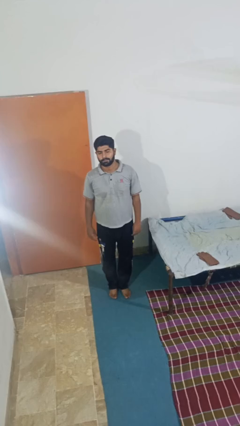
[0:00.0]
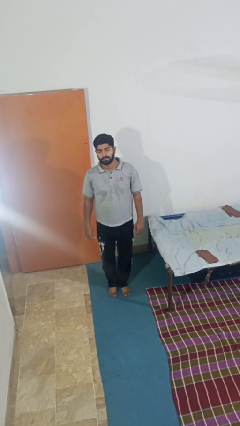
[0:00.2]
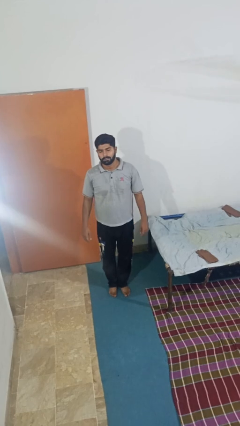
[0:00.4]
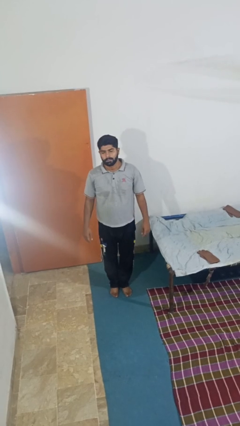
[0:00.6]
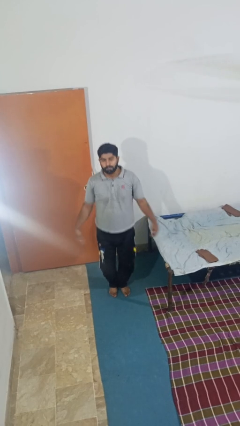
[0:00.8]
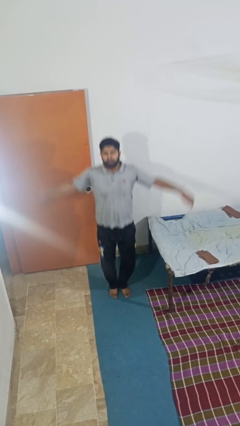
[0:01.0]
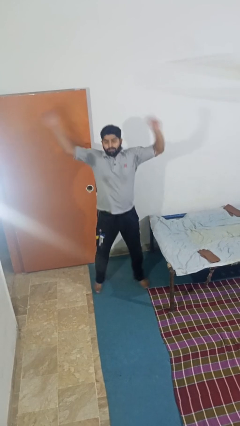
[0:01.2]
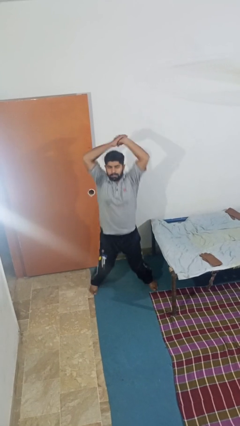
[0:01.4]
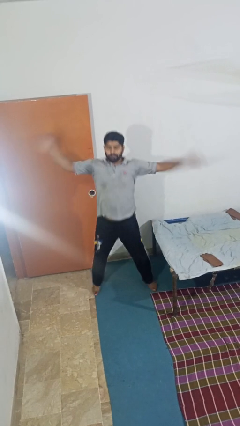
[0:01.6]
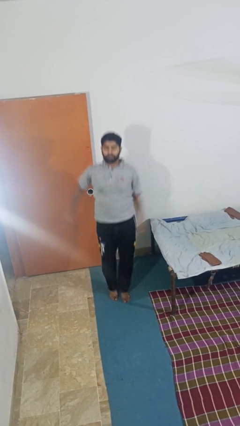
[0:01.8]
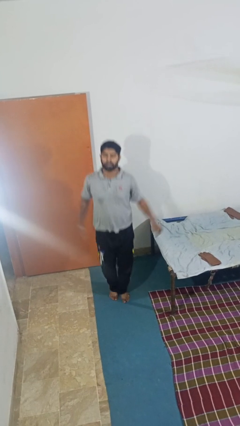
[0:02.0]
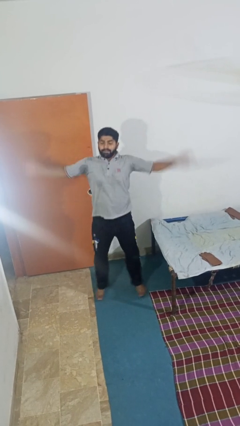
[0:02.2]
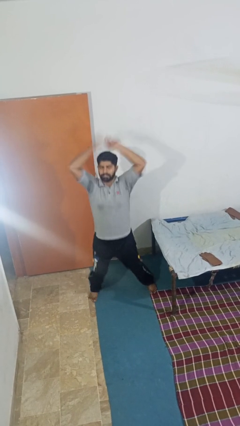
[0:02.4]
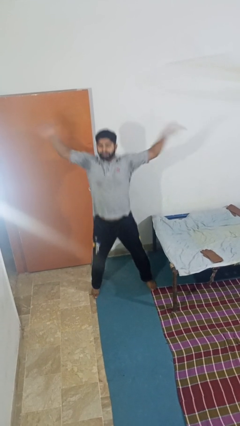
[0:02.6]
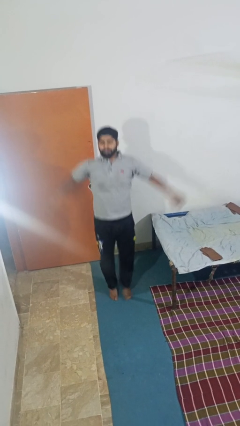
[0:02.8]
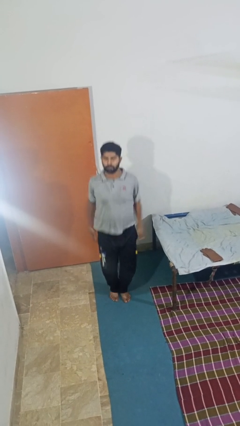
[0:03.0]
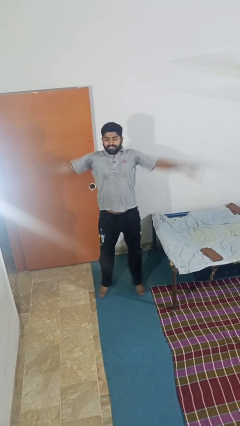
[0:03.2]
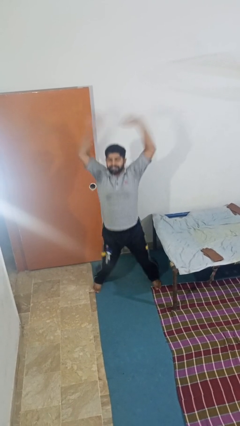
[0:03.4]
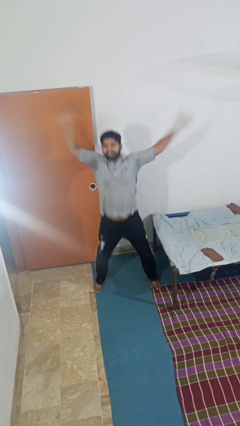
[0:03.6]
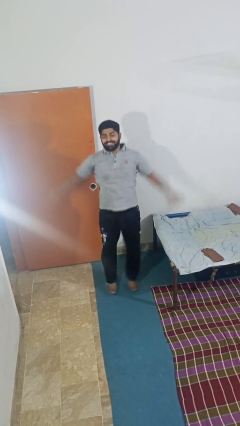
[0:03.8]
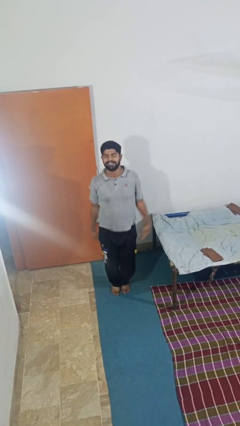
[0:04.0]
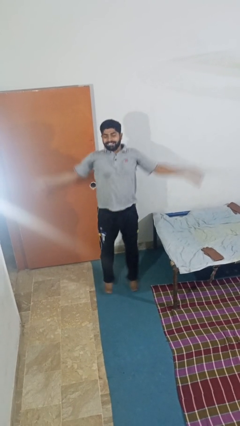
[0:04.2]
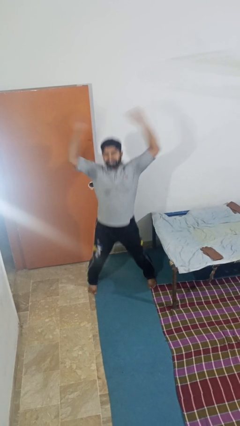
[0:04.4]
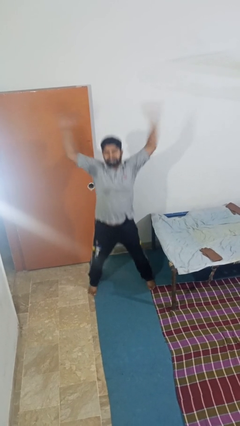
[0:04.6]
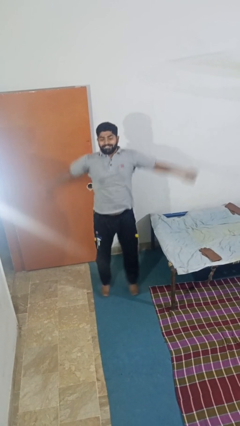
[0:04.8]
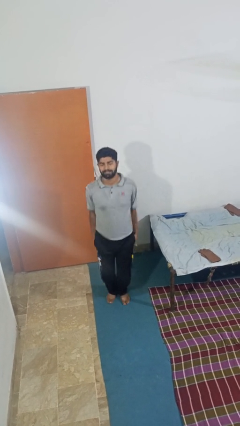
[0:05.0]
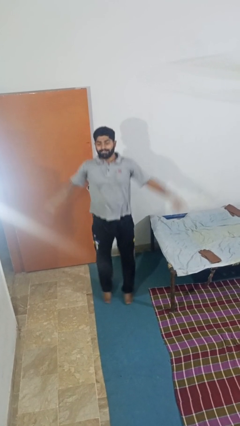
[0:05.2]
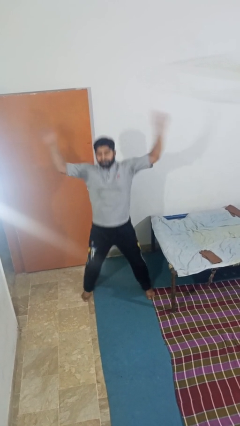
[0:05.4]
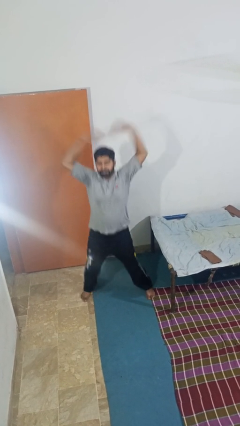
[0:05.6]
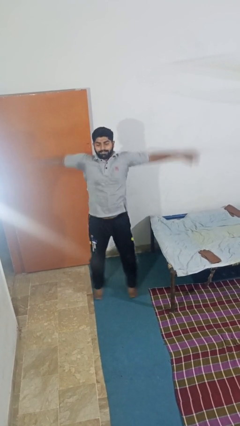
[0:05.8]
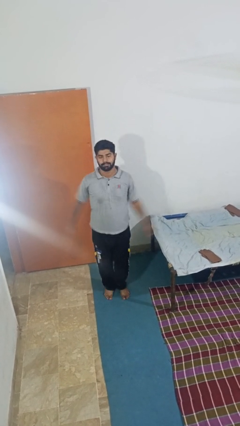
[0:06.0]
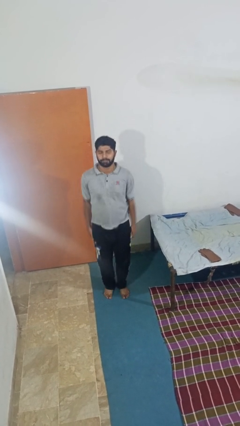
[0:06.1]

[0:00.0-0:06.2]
person exercises with jumping jacks

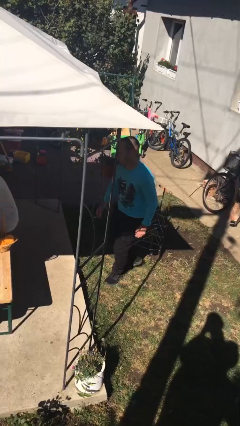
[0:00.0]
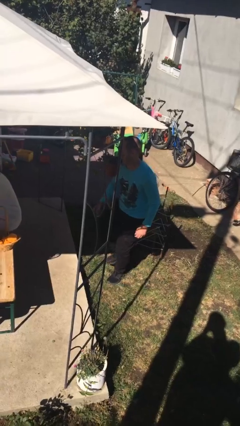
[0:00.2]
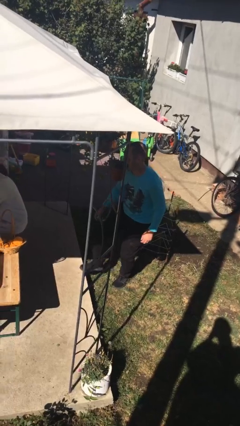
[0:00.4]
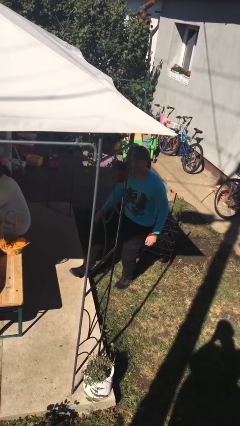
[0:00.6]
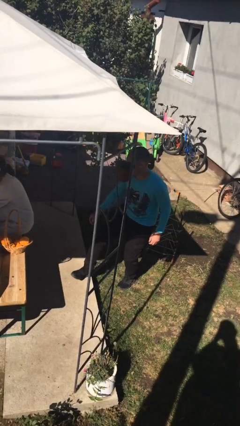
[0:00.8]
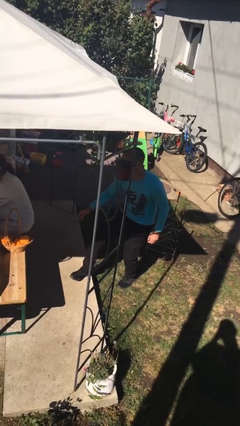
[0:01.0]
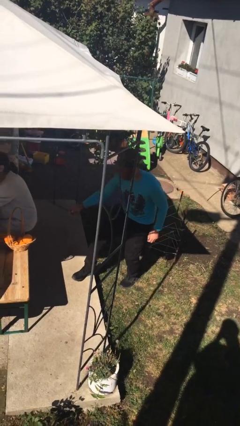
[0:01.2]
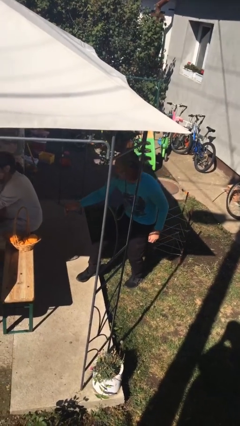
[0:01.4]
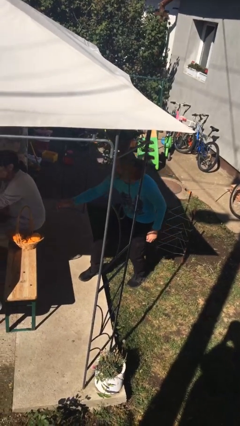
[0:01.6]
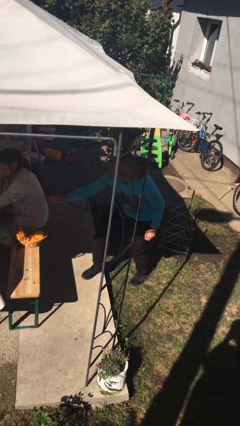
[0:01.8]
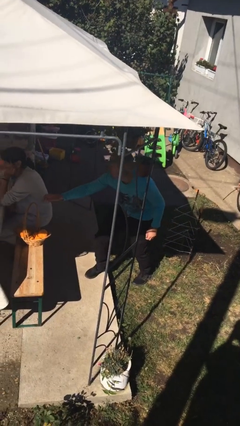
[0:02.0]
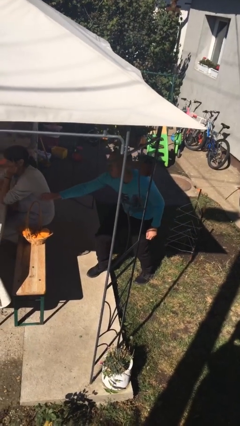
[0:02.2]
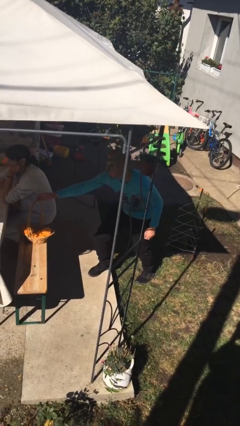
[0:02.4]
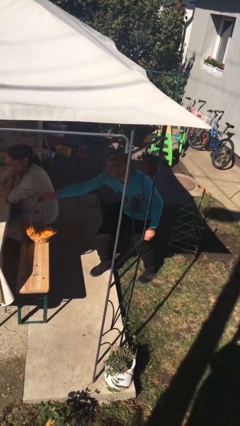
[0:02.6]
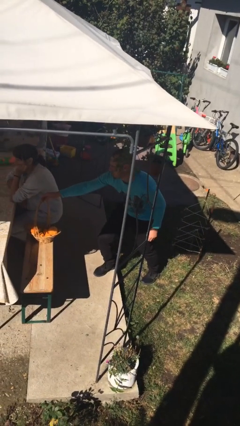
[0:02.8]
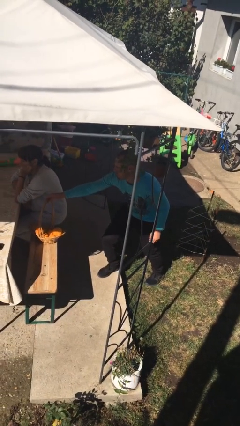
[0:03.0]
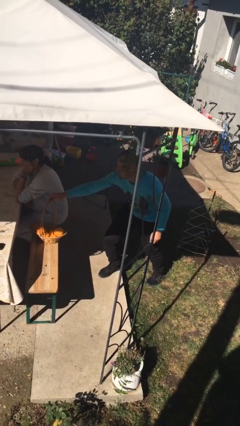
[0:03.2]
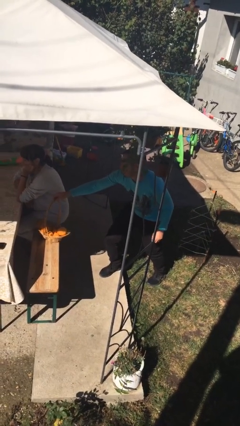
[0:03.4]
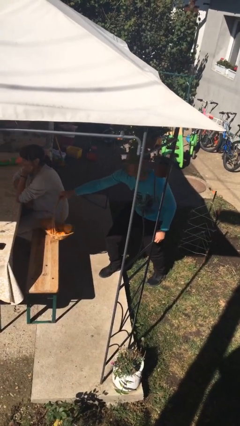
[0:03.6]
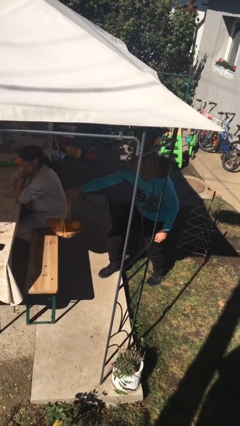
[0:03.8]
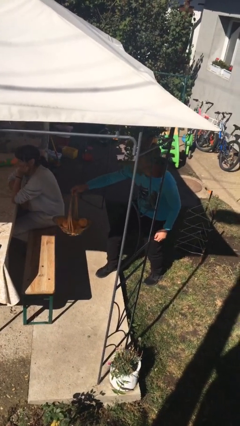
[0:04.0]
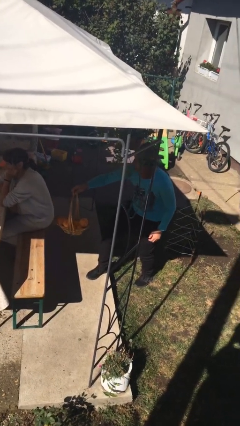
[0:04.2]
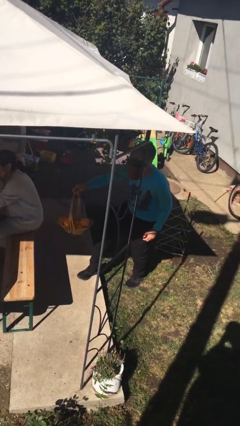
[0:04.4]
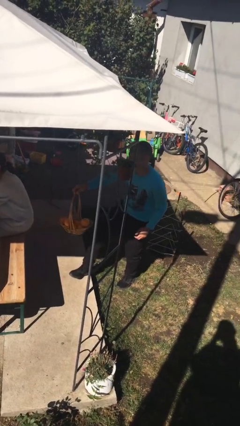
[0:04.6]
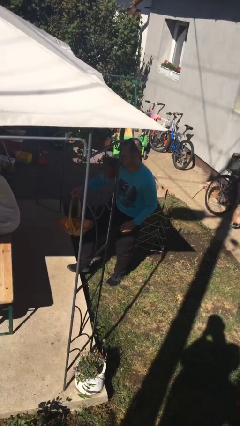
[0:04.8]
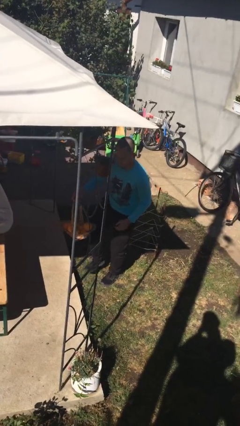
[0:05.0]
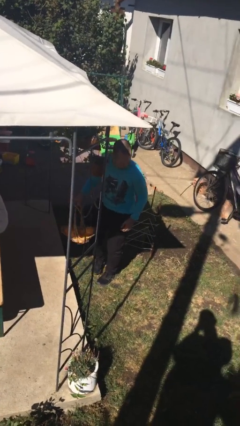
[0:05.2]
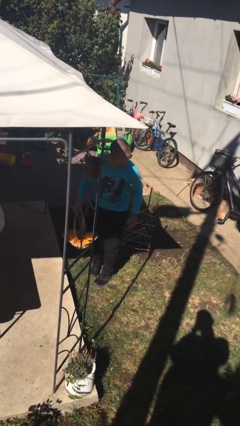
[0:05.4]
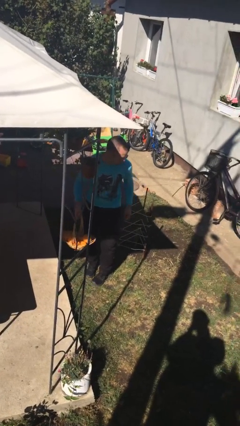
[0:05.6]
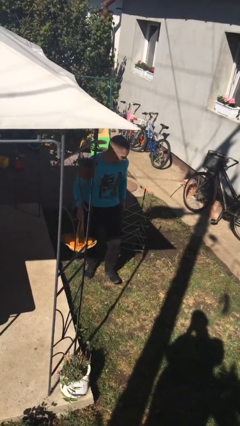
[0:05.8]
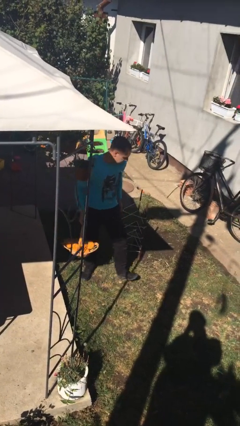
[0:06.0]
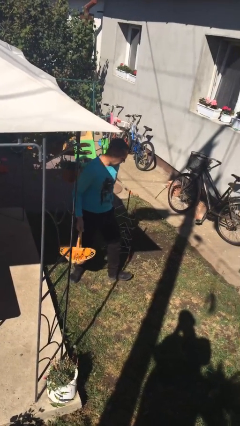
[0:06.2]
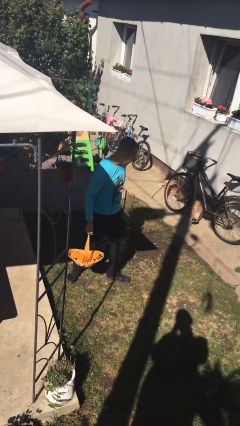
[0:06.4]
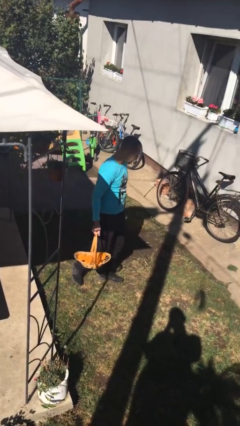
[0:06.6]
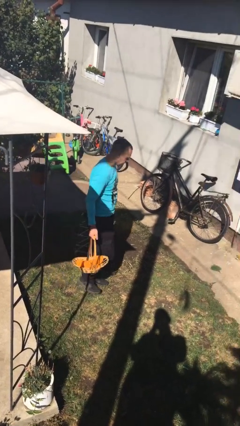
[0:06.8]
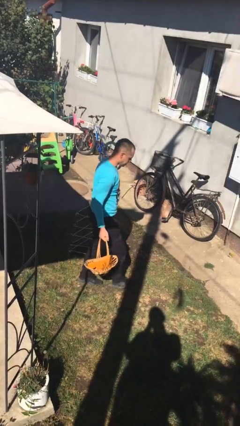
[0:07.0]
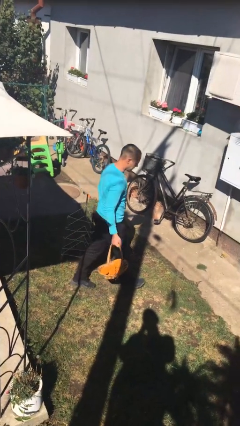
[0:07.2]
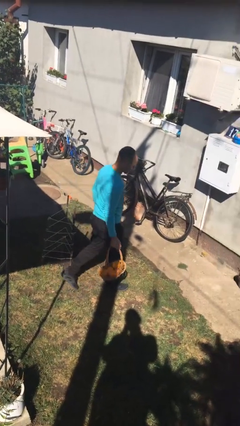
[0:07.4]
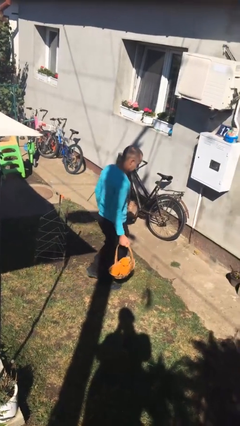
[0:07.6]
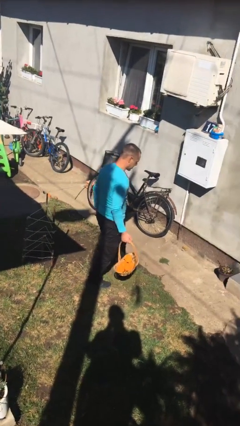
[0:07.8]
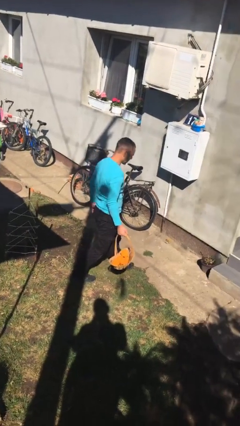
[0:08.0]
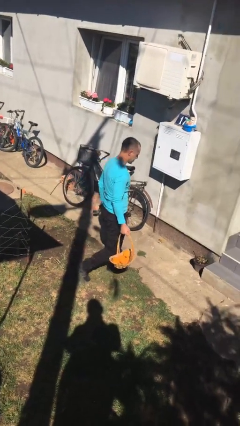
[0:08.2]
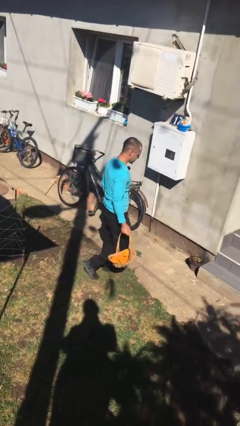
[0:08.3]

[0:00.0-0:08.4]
person steals object from person

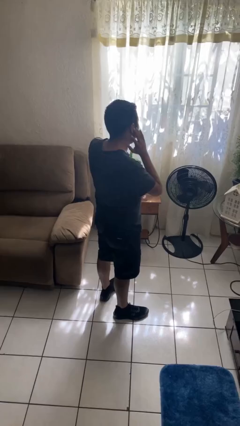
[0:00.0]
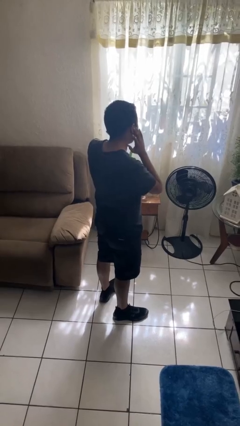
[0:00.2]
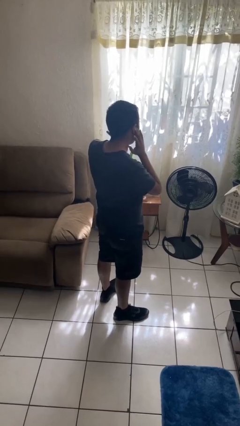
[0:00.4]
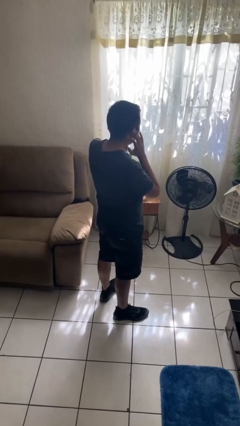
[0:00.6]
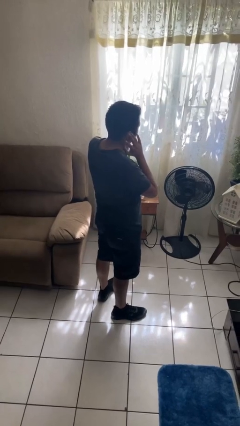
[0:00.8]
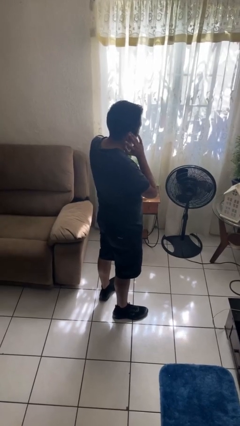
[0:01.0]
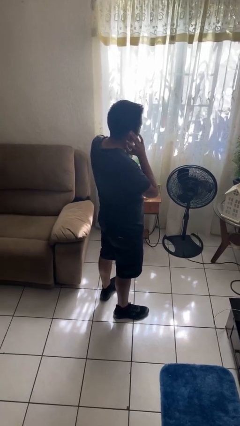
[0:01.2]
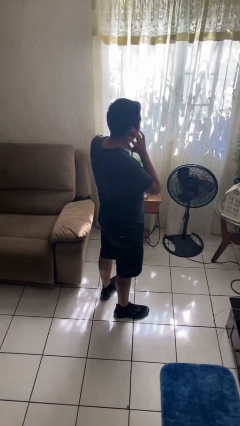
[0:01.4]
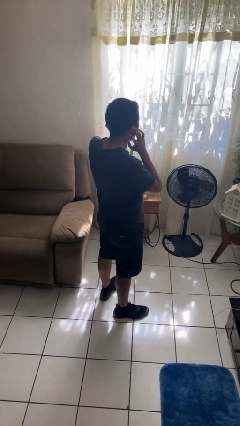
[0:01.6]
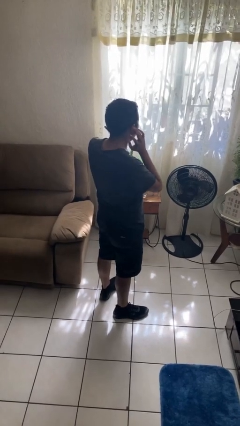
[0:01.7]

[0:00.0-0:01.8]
person puts fingers in ear

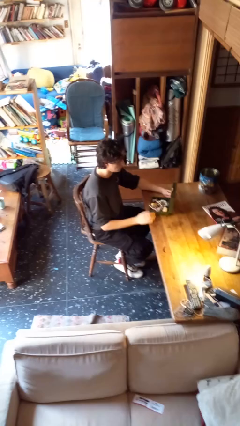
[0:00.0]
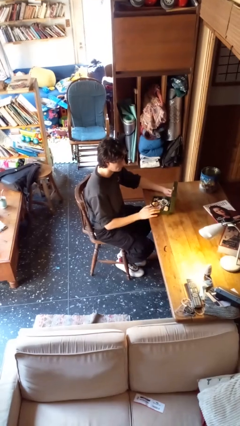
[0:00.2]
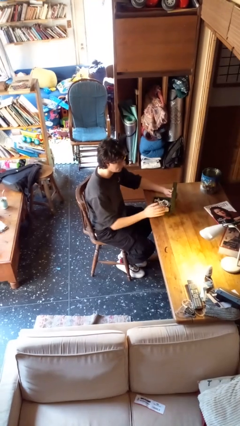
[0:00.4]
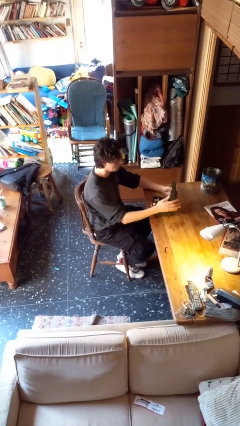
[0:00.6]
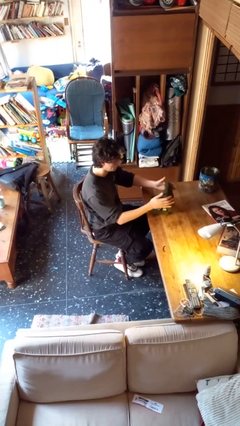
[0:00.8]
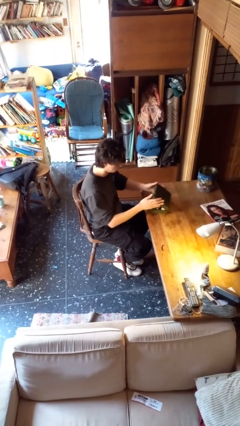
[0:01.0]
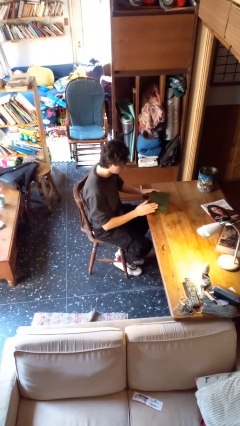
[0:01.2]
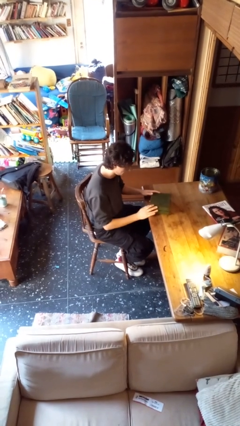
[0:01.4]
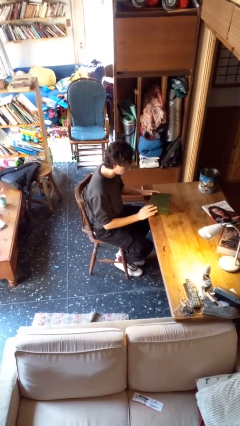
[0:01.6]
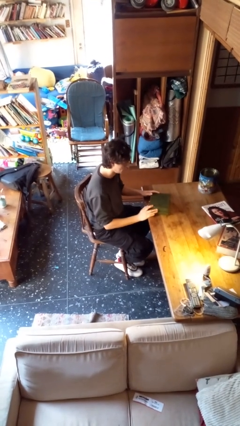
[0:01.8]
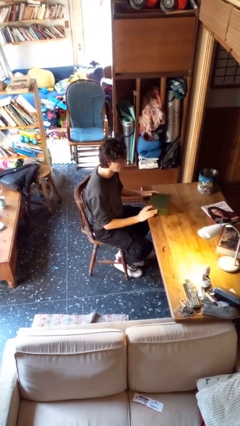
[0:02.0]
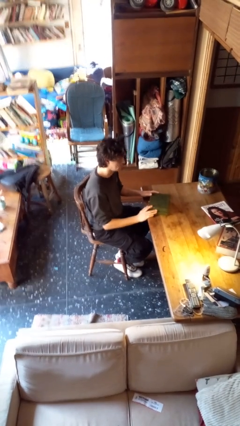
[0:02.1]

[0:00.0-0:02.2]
person closes jewelry box
